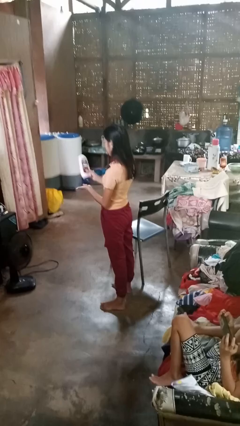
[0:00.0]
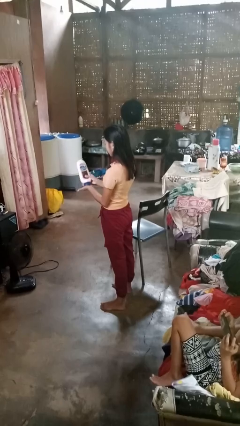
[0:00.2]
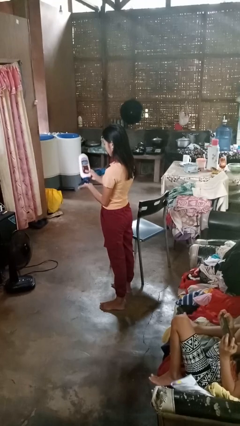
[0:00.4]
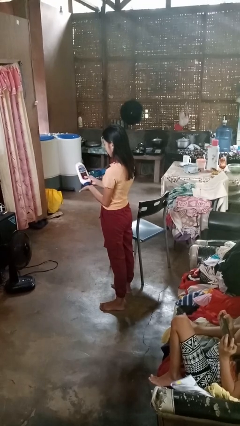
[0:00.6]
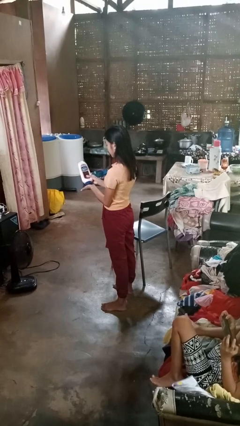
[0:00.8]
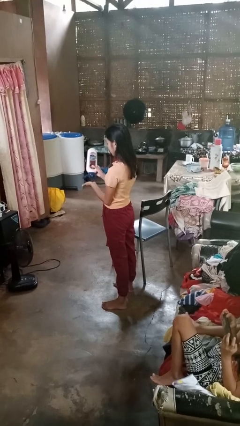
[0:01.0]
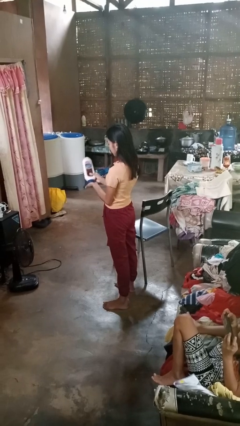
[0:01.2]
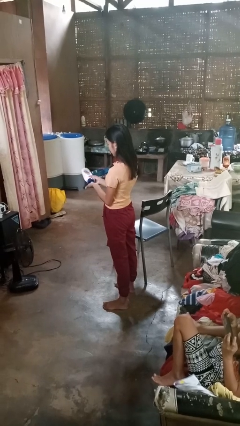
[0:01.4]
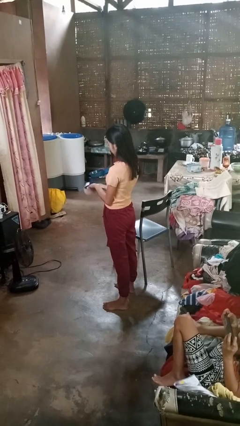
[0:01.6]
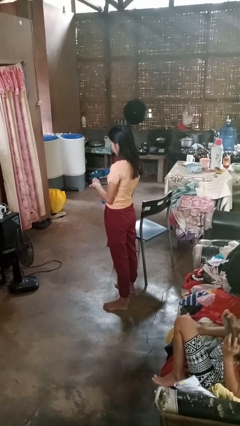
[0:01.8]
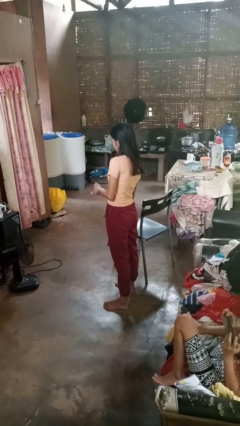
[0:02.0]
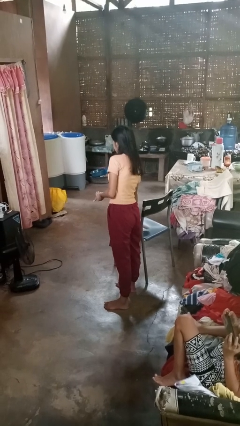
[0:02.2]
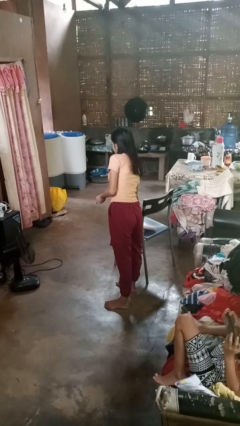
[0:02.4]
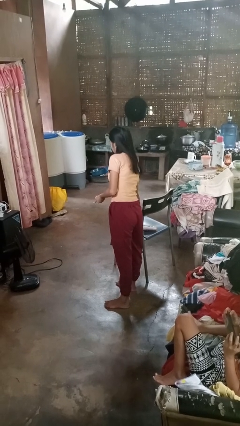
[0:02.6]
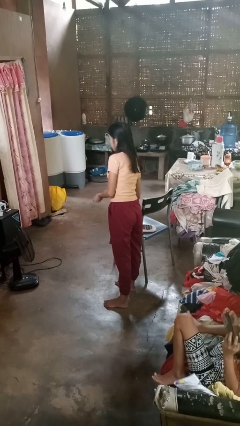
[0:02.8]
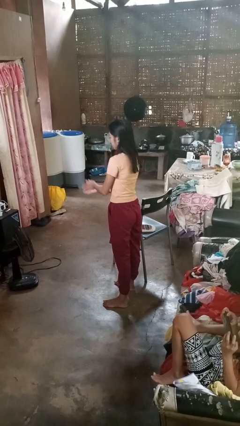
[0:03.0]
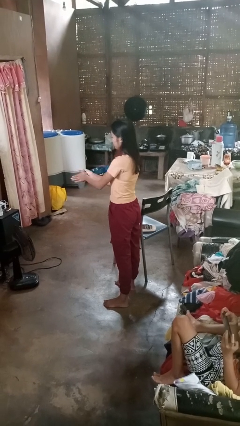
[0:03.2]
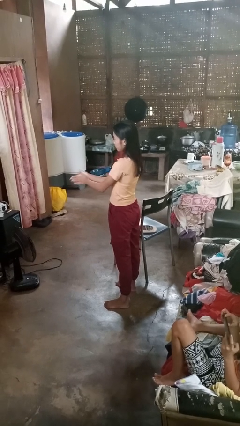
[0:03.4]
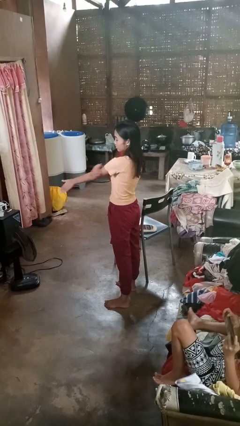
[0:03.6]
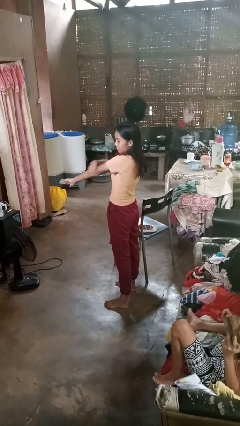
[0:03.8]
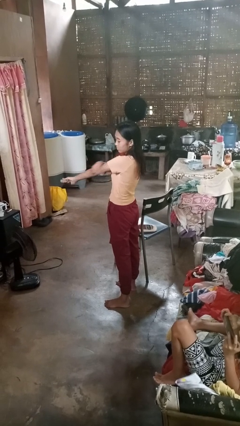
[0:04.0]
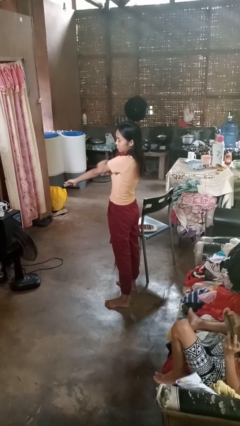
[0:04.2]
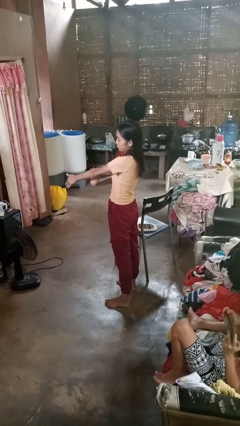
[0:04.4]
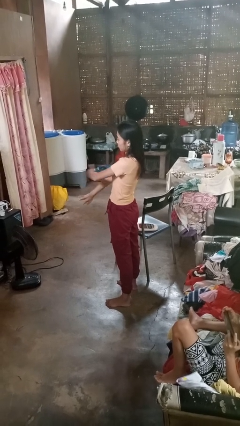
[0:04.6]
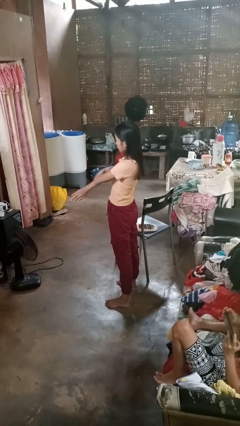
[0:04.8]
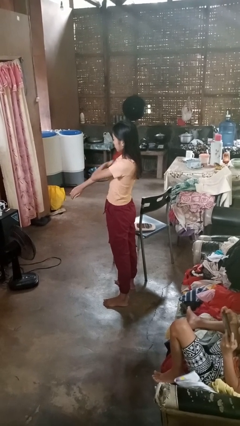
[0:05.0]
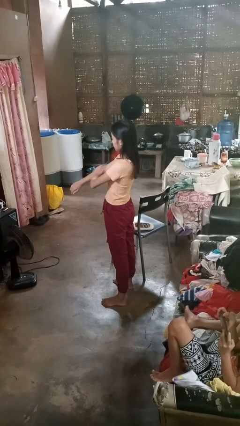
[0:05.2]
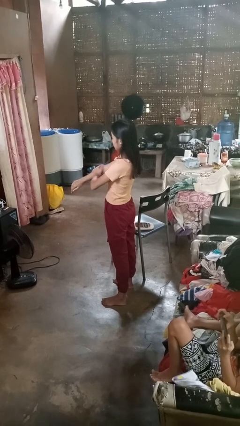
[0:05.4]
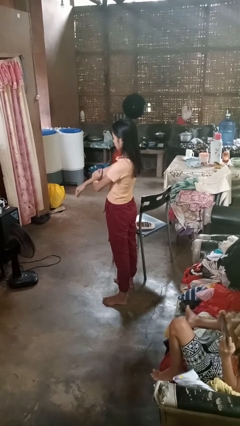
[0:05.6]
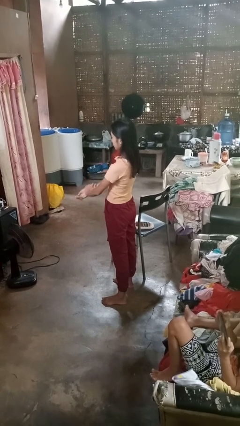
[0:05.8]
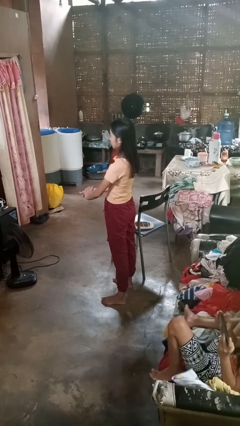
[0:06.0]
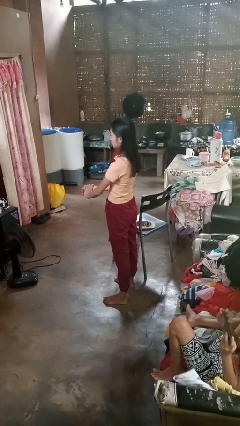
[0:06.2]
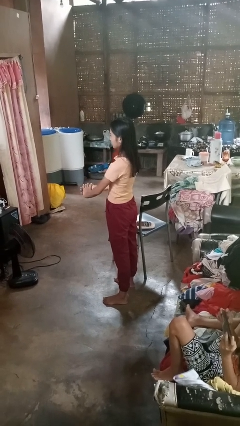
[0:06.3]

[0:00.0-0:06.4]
person applies sunscreen

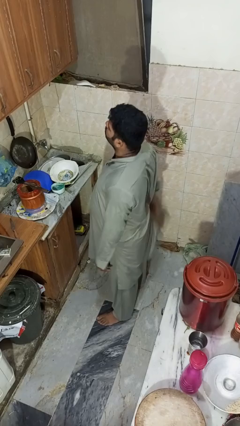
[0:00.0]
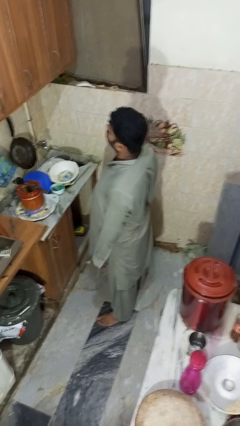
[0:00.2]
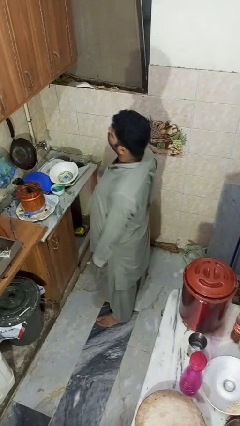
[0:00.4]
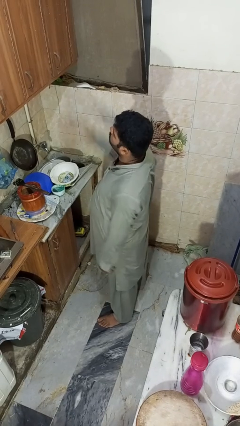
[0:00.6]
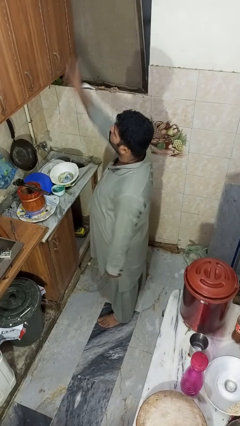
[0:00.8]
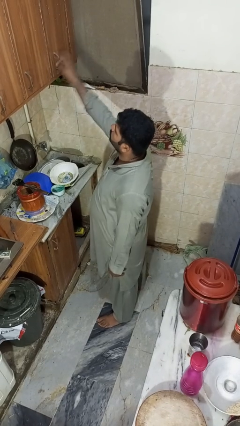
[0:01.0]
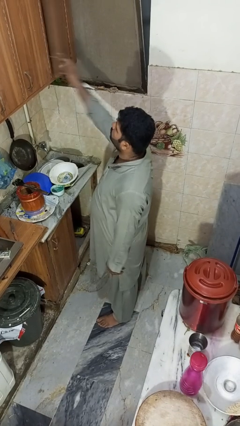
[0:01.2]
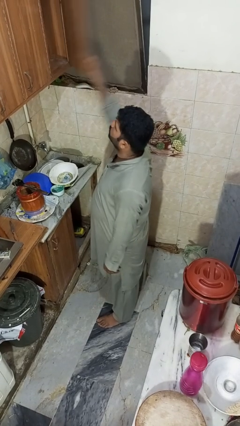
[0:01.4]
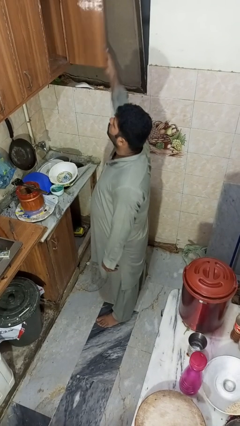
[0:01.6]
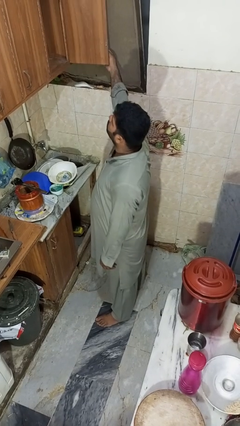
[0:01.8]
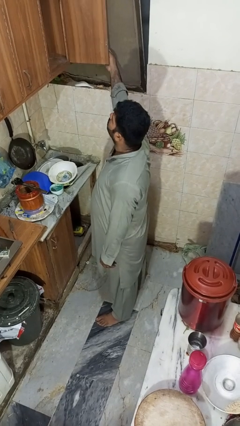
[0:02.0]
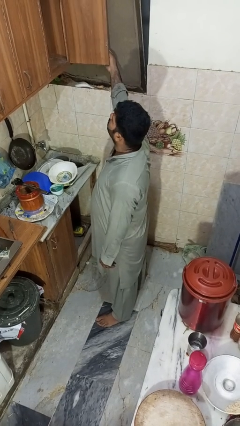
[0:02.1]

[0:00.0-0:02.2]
person opens cabinet

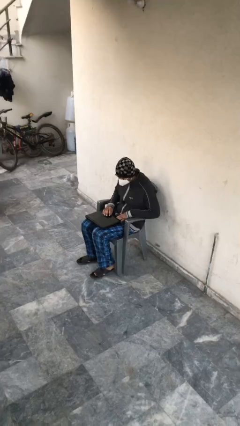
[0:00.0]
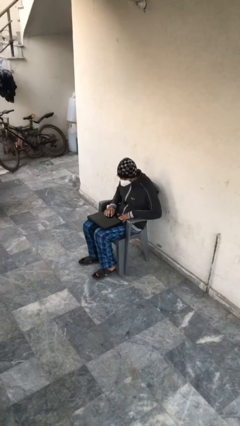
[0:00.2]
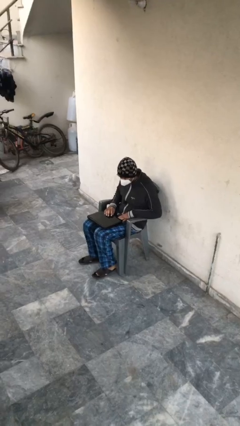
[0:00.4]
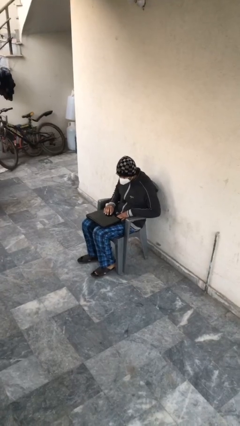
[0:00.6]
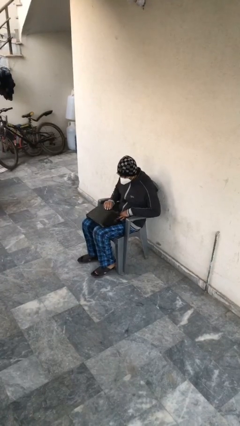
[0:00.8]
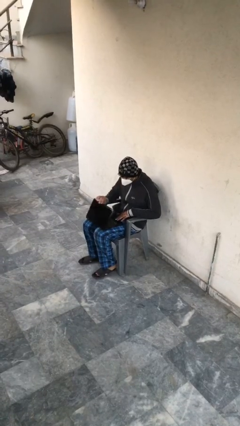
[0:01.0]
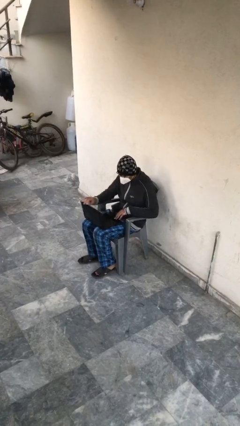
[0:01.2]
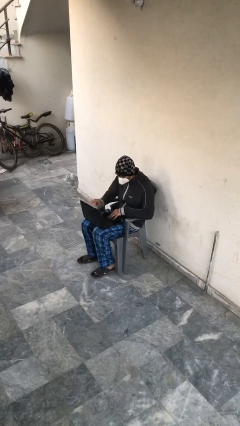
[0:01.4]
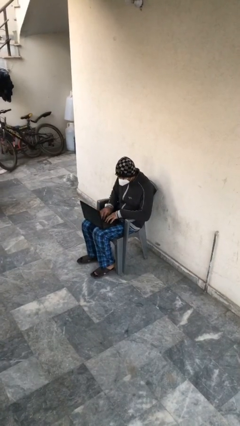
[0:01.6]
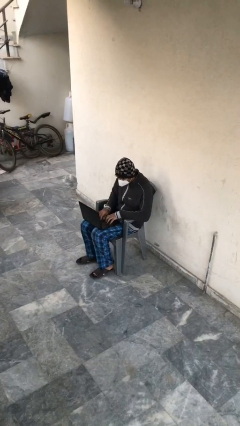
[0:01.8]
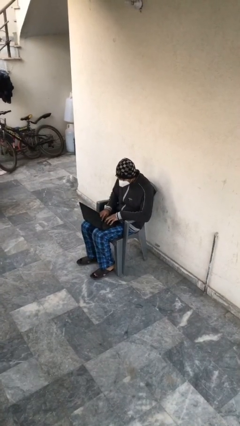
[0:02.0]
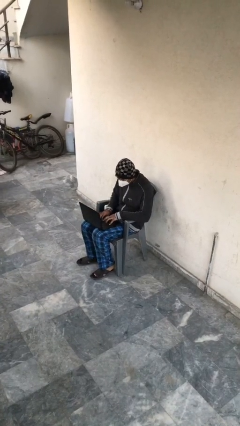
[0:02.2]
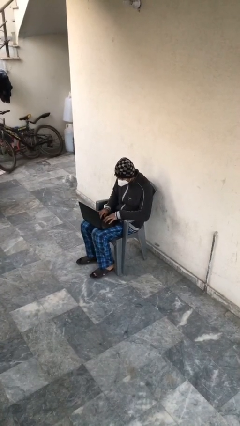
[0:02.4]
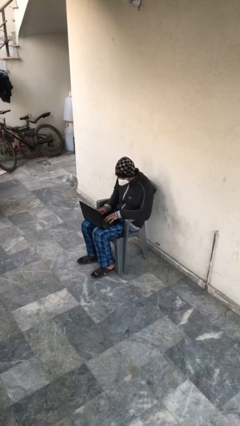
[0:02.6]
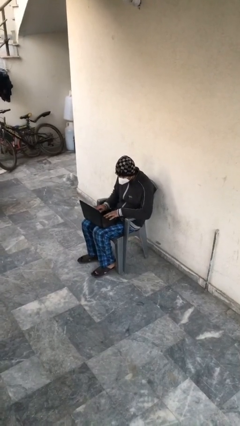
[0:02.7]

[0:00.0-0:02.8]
person interacts with laptop

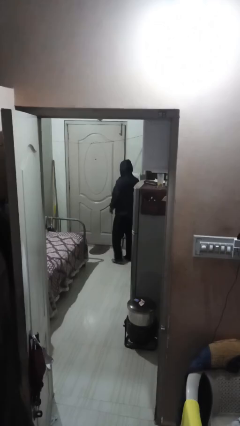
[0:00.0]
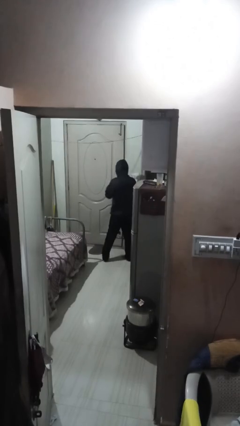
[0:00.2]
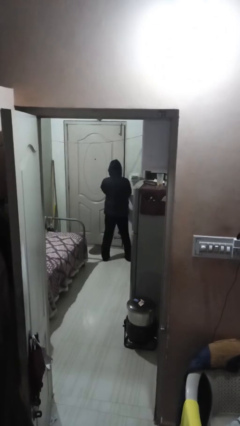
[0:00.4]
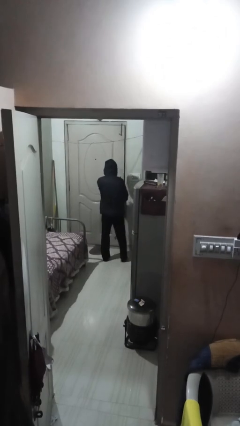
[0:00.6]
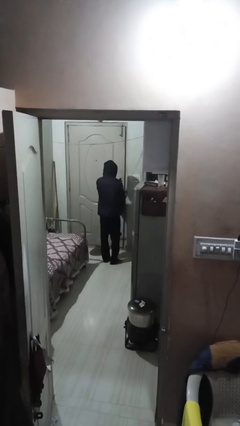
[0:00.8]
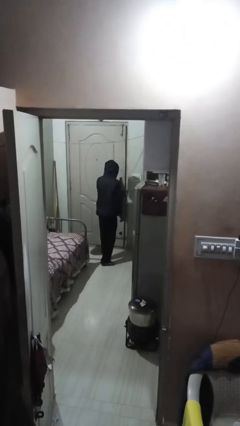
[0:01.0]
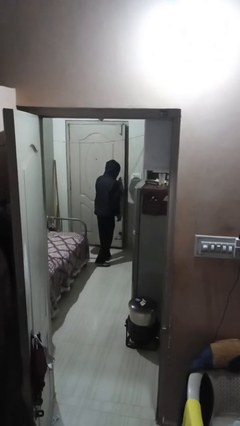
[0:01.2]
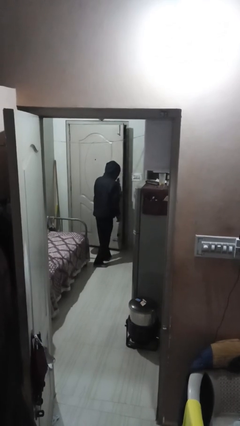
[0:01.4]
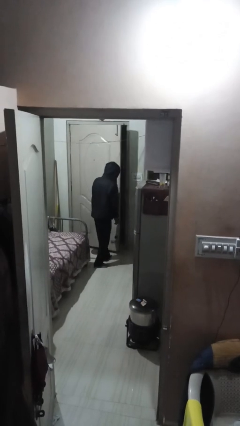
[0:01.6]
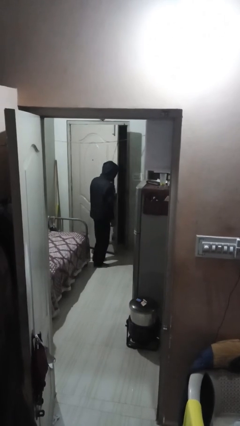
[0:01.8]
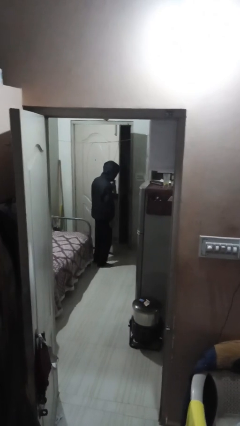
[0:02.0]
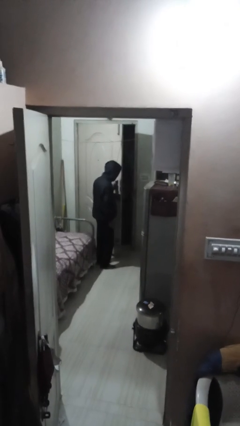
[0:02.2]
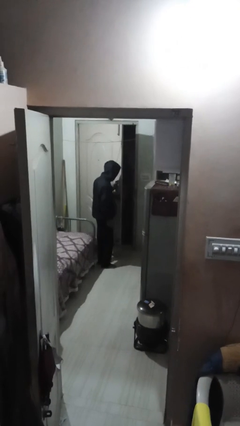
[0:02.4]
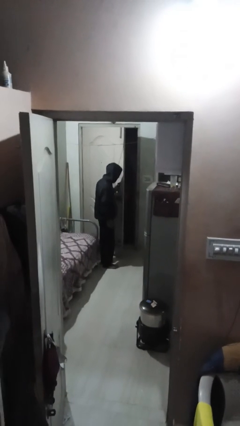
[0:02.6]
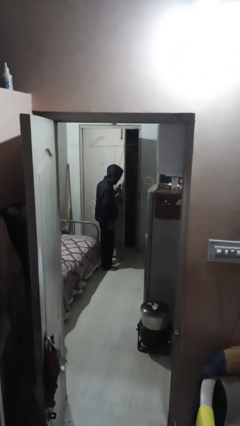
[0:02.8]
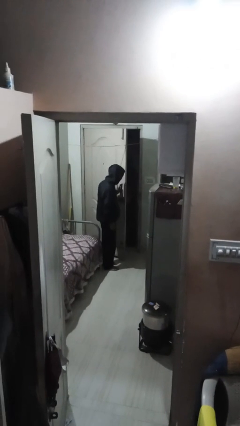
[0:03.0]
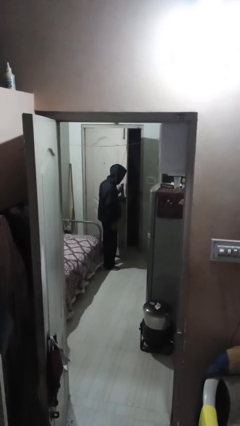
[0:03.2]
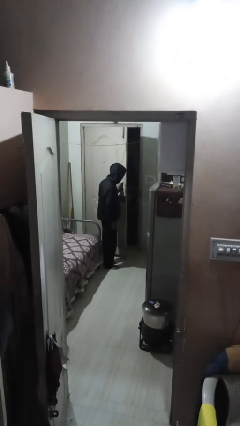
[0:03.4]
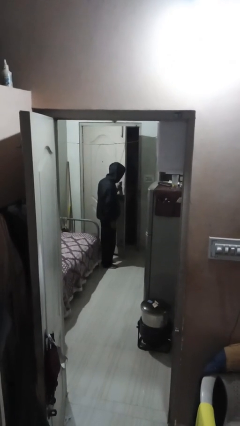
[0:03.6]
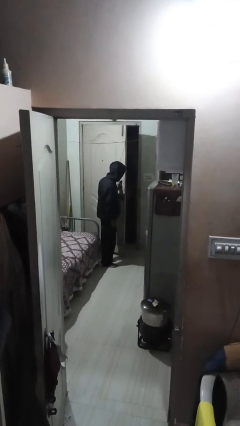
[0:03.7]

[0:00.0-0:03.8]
person opens facility door

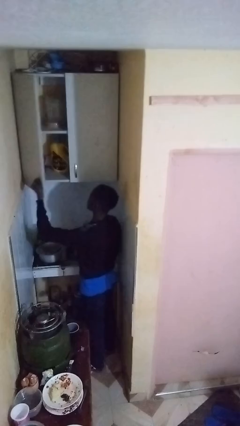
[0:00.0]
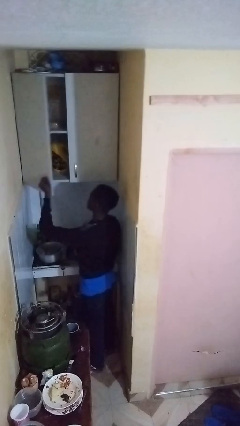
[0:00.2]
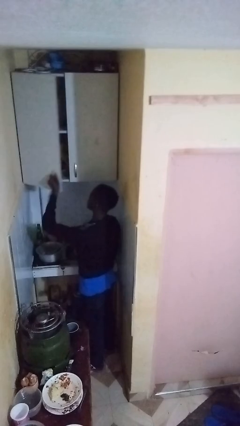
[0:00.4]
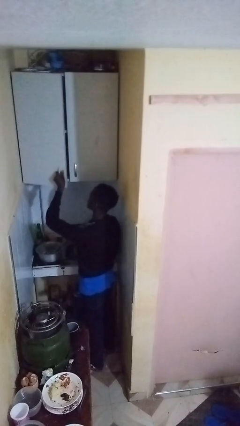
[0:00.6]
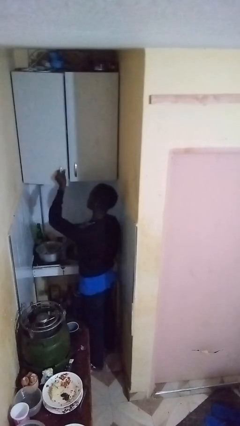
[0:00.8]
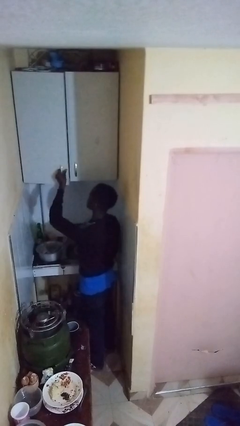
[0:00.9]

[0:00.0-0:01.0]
person closes kitchen drawer

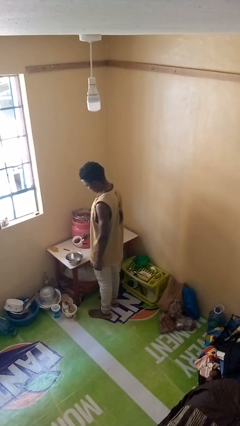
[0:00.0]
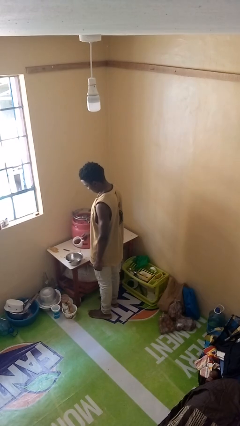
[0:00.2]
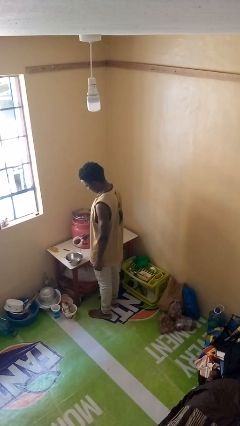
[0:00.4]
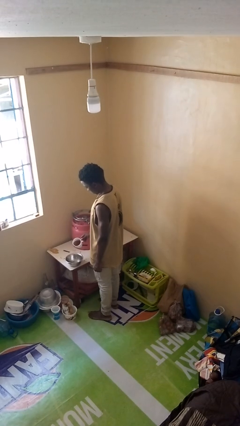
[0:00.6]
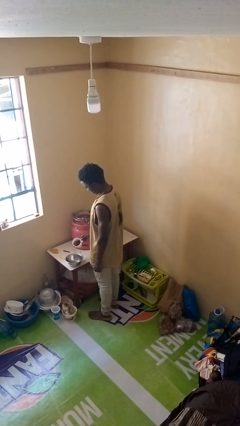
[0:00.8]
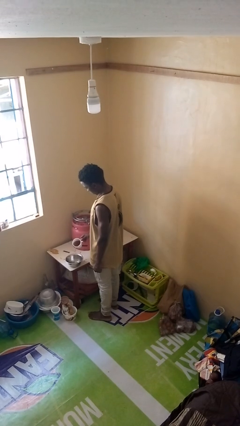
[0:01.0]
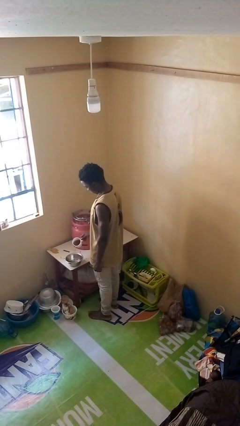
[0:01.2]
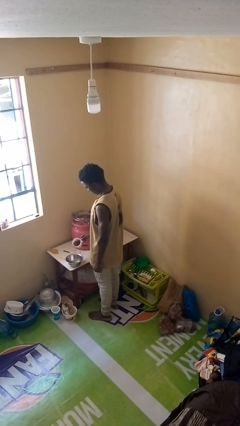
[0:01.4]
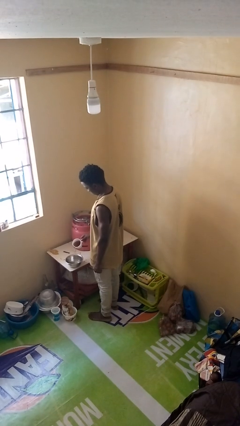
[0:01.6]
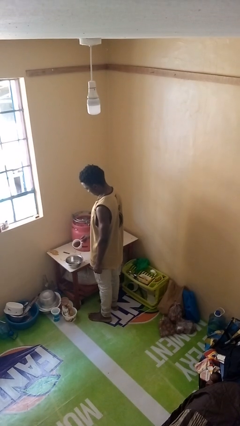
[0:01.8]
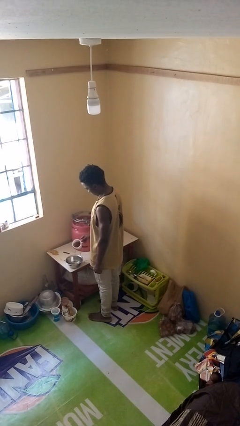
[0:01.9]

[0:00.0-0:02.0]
person pours into bowl
